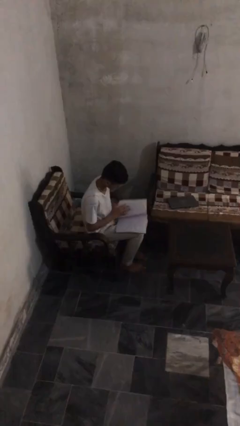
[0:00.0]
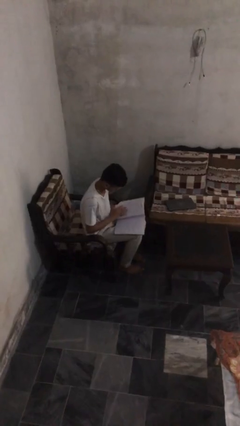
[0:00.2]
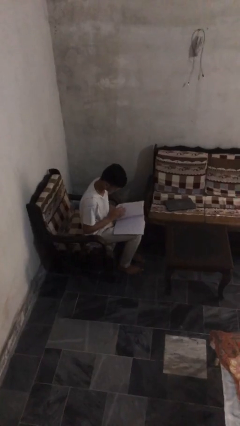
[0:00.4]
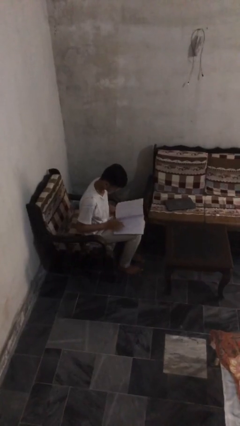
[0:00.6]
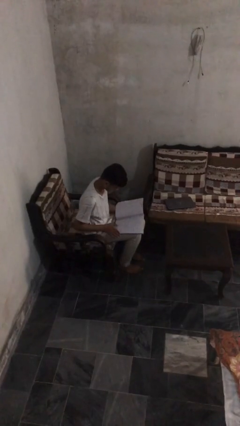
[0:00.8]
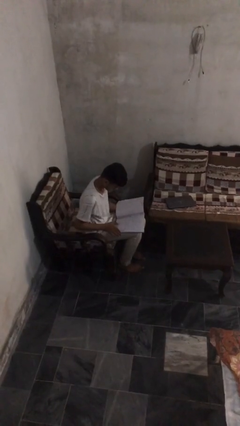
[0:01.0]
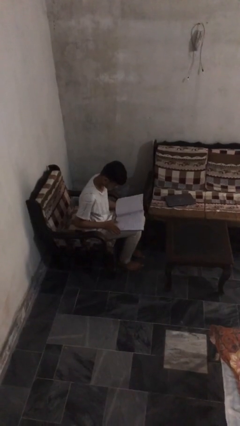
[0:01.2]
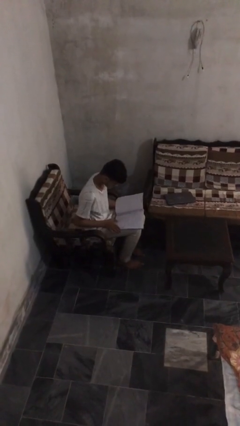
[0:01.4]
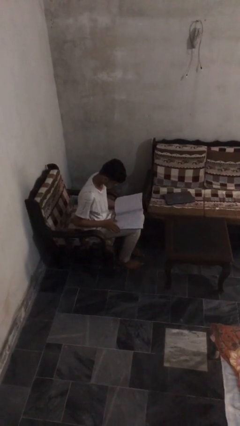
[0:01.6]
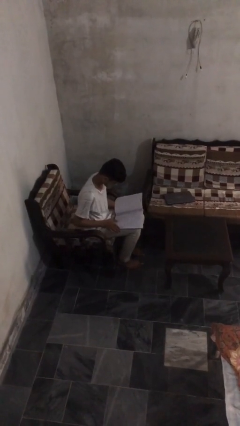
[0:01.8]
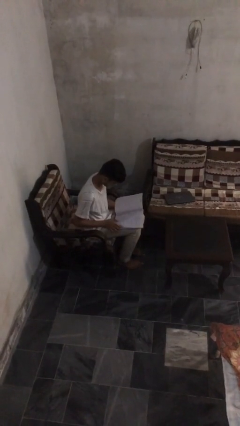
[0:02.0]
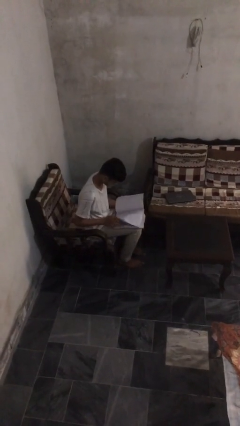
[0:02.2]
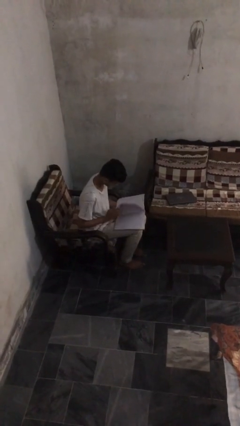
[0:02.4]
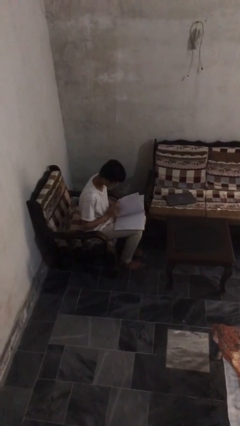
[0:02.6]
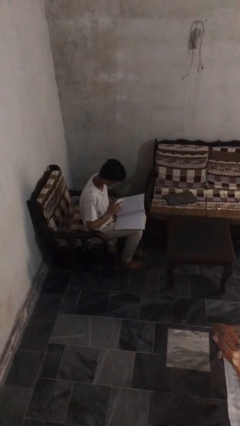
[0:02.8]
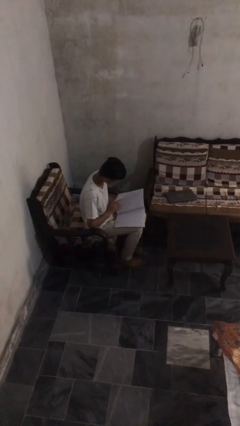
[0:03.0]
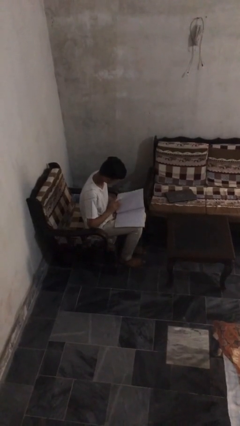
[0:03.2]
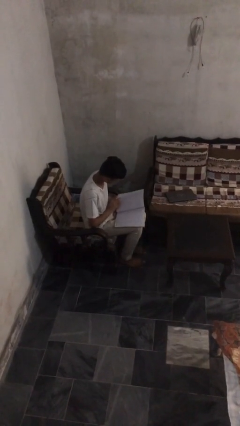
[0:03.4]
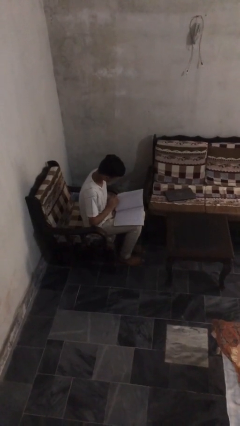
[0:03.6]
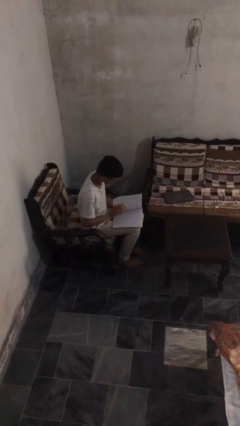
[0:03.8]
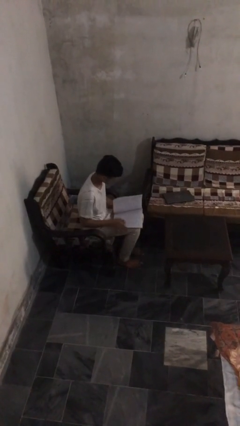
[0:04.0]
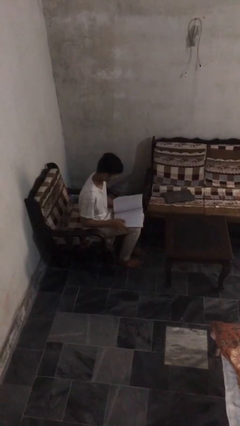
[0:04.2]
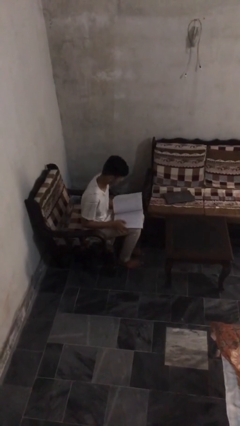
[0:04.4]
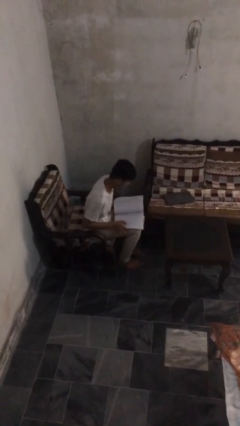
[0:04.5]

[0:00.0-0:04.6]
person reads document

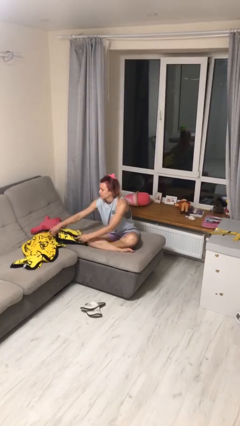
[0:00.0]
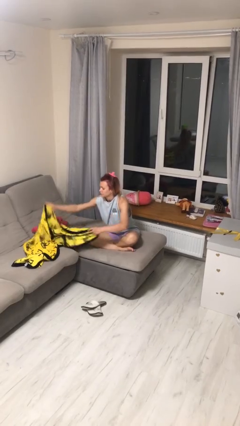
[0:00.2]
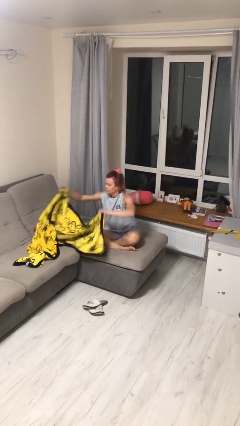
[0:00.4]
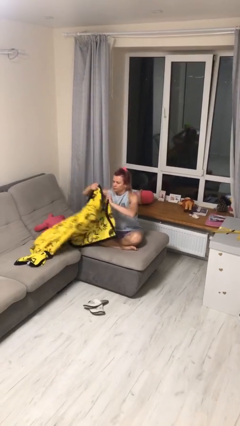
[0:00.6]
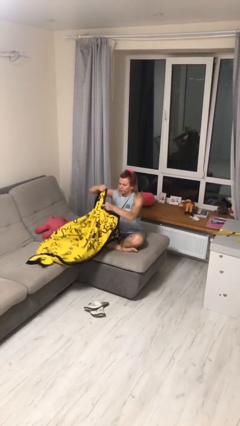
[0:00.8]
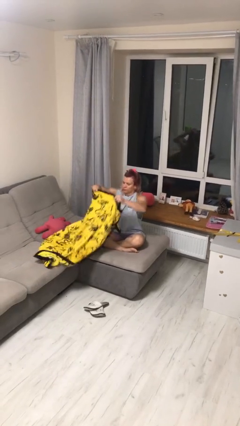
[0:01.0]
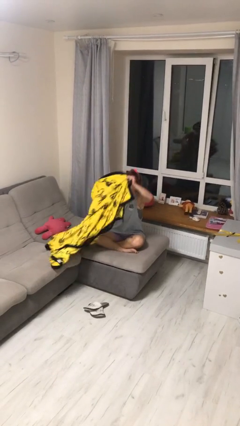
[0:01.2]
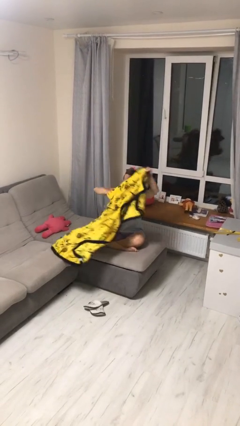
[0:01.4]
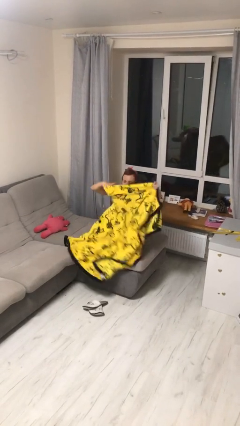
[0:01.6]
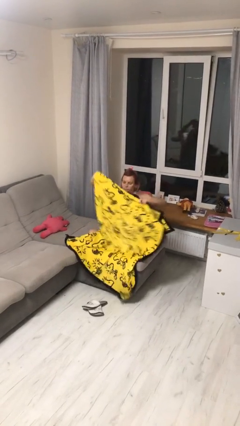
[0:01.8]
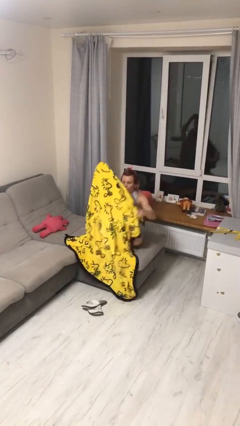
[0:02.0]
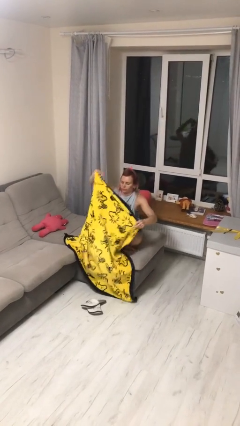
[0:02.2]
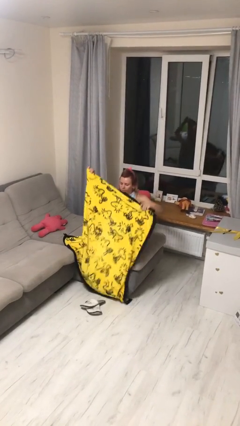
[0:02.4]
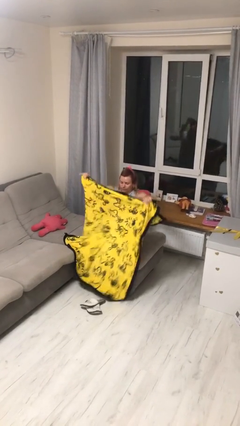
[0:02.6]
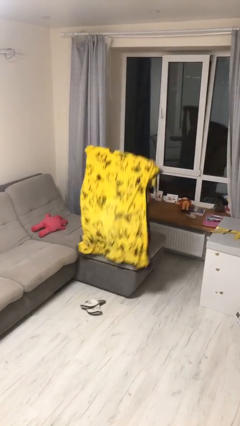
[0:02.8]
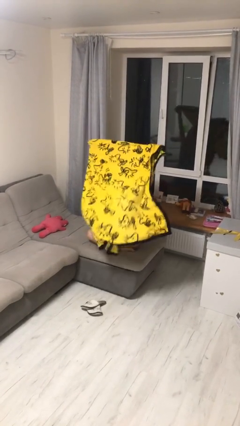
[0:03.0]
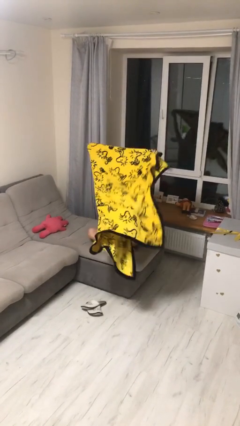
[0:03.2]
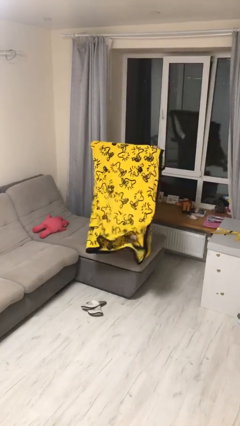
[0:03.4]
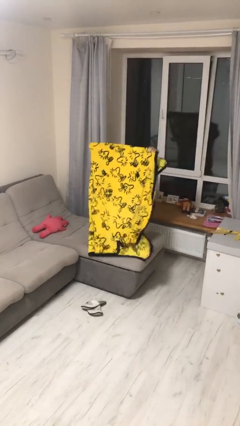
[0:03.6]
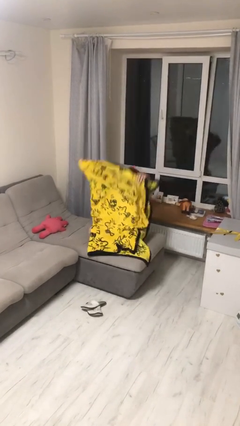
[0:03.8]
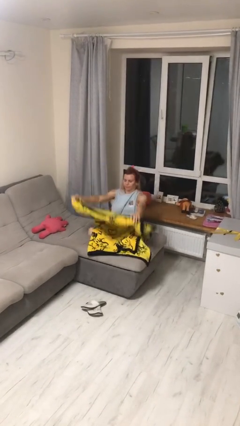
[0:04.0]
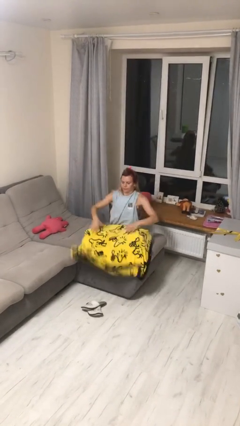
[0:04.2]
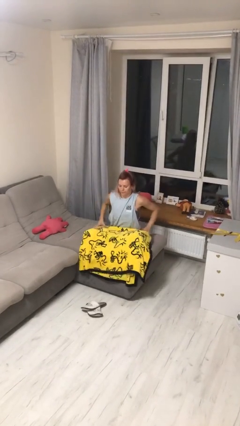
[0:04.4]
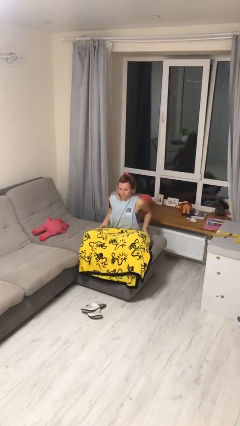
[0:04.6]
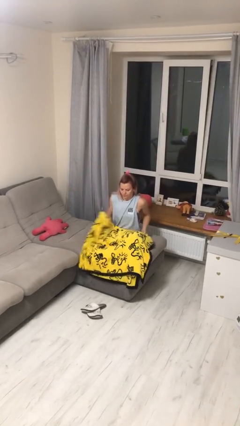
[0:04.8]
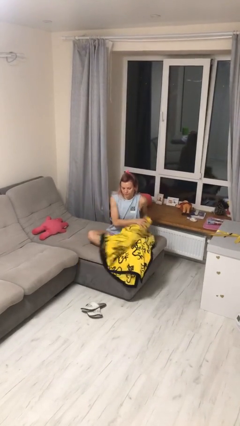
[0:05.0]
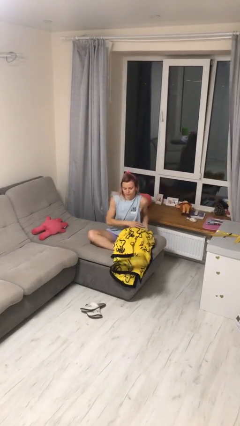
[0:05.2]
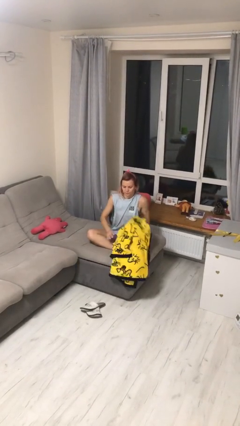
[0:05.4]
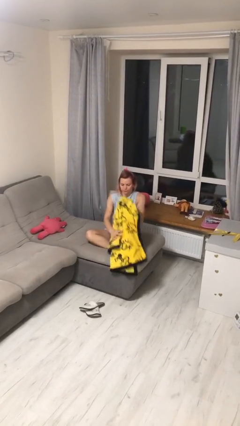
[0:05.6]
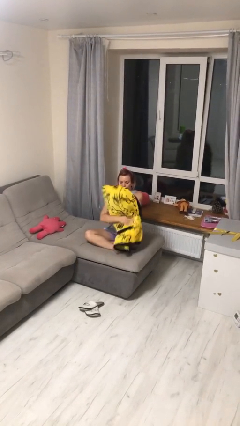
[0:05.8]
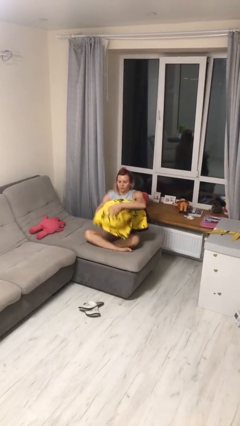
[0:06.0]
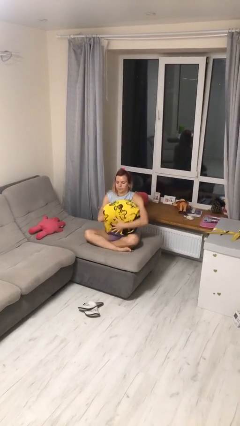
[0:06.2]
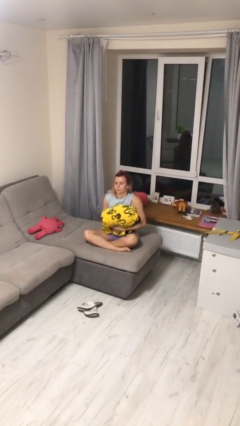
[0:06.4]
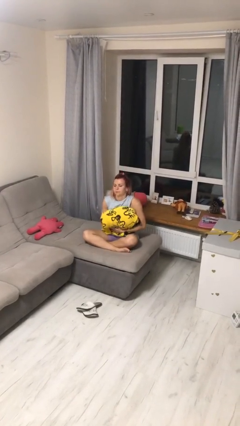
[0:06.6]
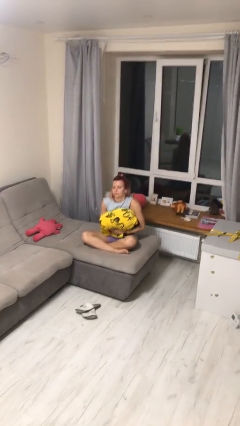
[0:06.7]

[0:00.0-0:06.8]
person folds blanket

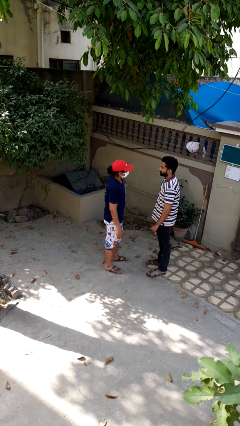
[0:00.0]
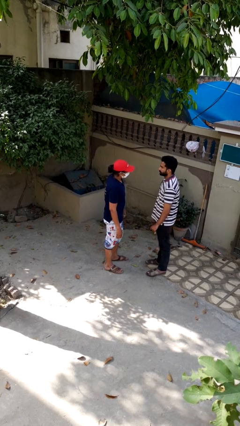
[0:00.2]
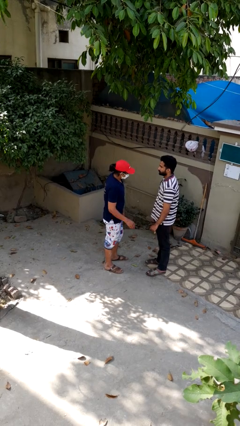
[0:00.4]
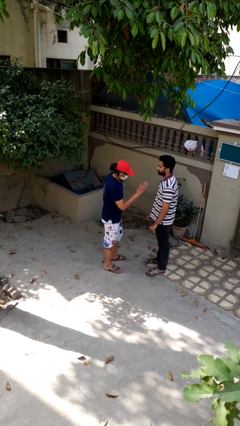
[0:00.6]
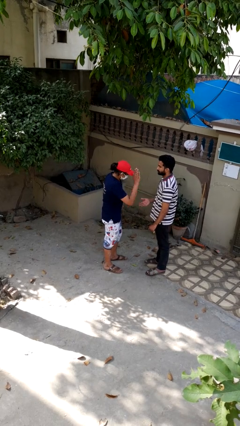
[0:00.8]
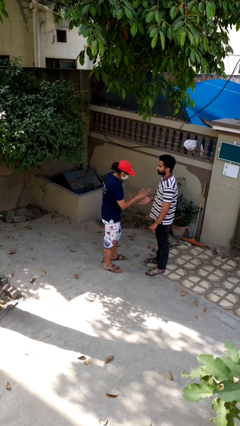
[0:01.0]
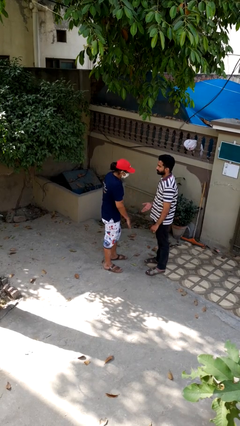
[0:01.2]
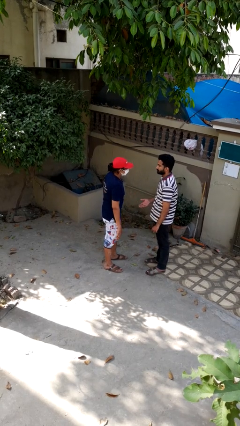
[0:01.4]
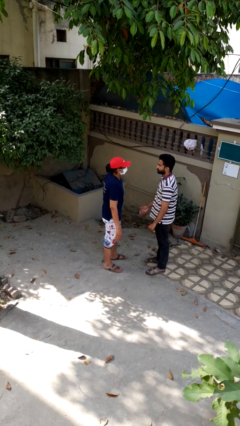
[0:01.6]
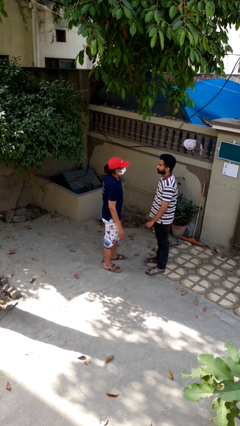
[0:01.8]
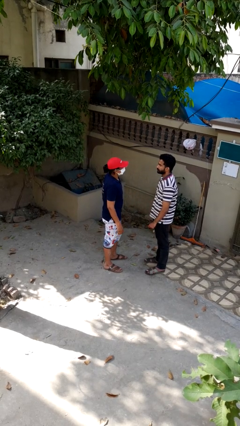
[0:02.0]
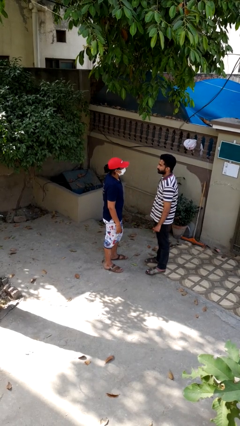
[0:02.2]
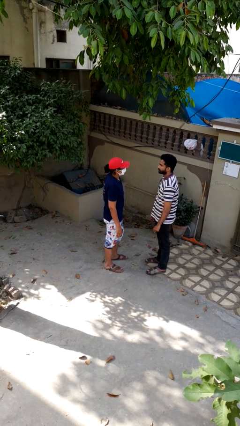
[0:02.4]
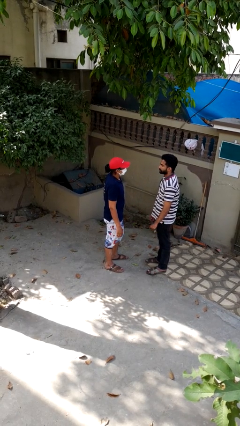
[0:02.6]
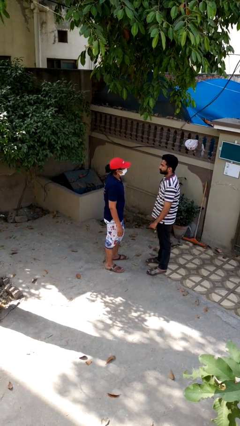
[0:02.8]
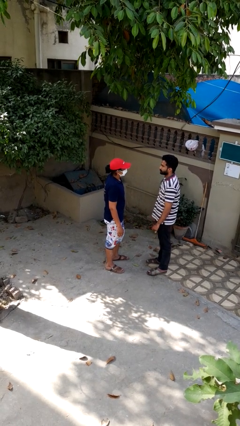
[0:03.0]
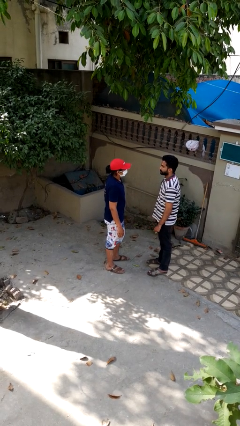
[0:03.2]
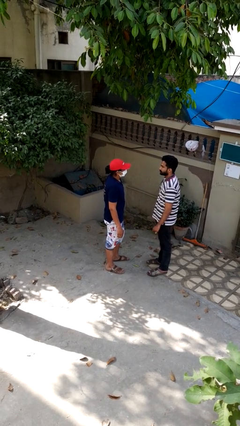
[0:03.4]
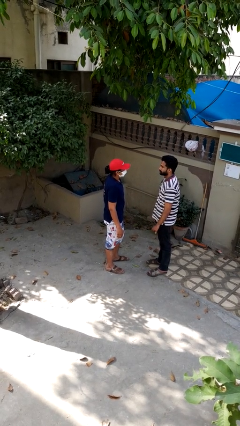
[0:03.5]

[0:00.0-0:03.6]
person highfives hand

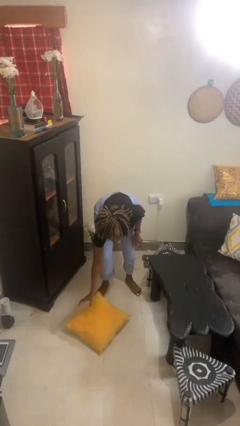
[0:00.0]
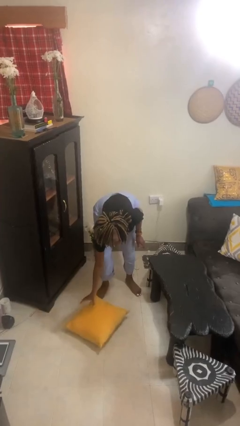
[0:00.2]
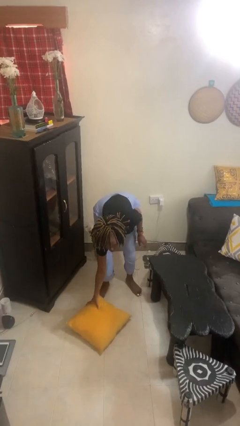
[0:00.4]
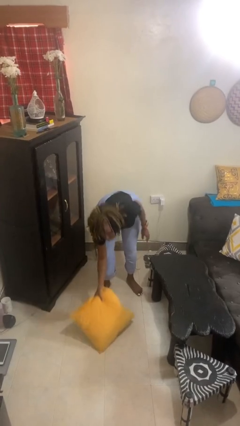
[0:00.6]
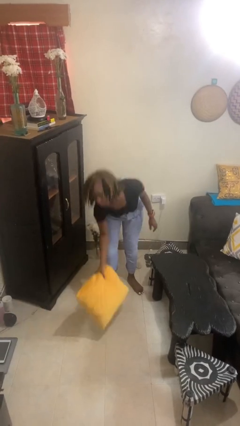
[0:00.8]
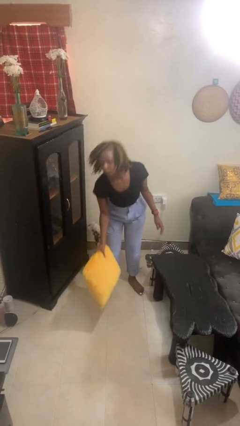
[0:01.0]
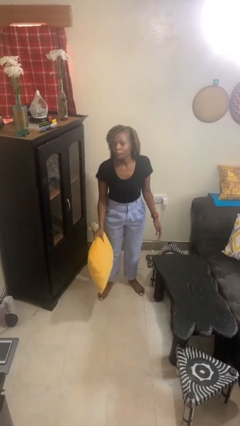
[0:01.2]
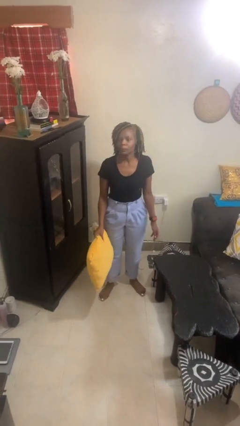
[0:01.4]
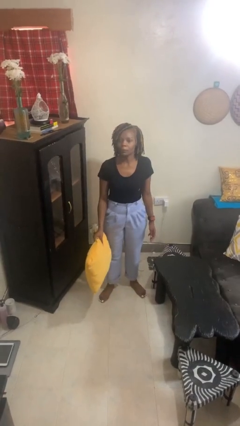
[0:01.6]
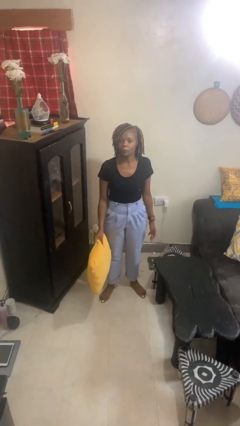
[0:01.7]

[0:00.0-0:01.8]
person picks up object from floor

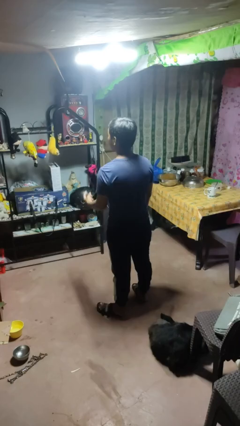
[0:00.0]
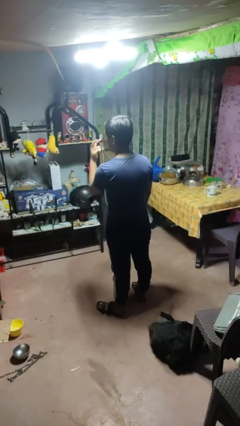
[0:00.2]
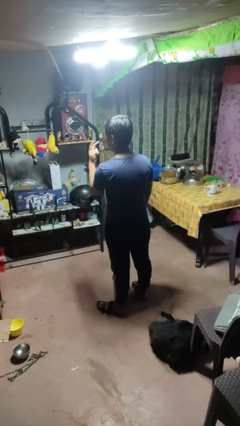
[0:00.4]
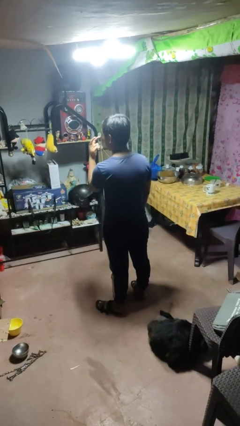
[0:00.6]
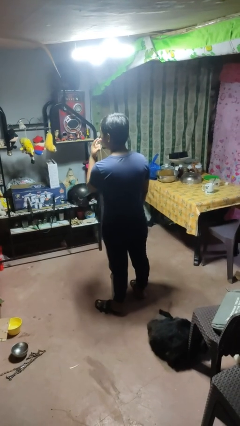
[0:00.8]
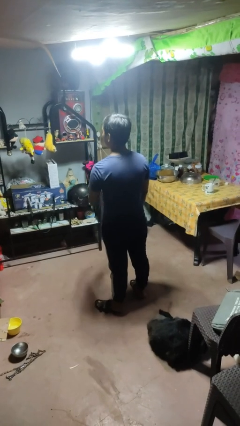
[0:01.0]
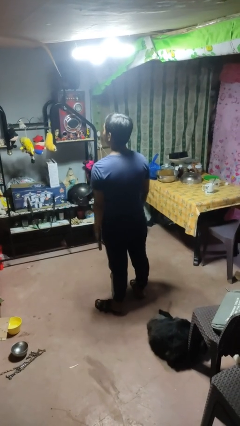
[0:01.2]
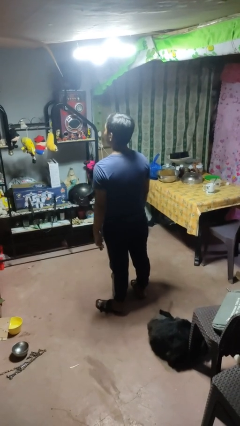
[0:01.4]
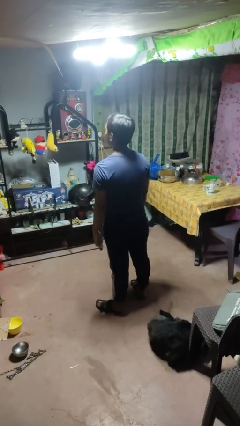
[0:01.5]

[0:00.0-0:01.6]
person gestures watch closely
